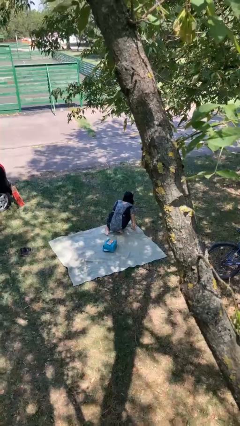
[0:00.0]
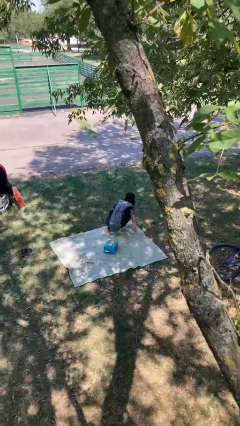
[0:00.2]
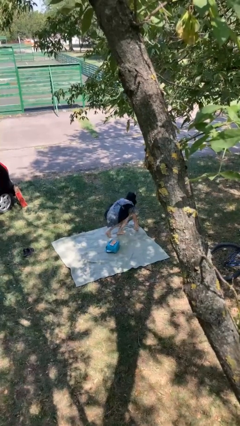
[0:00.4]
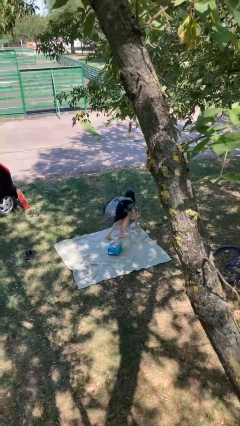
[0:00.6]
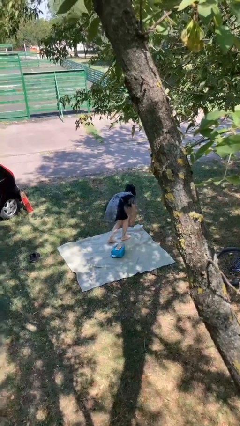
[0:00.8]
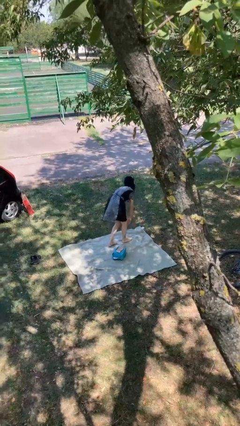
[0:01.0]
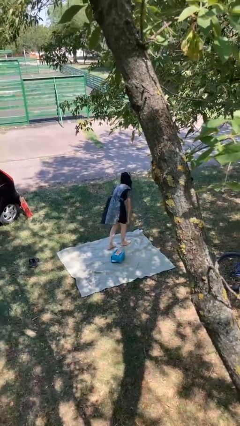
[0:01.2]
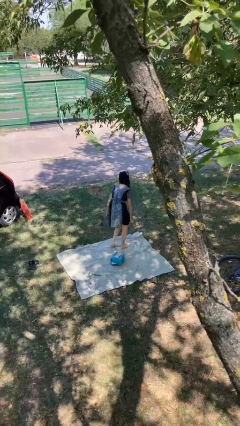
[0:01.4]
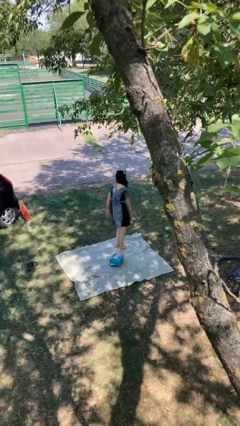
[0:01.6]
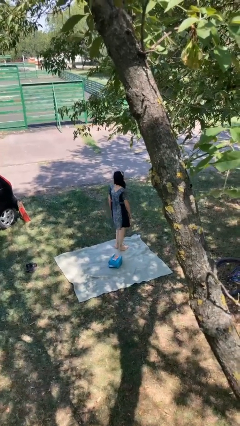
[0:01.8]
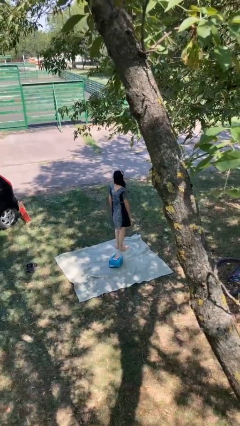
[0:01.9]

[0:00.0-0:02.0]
person stands up from floor

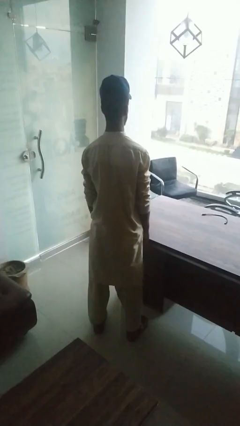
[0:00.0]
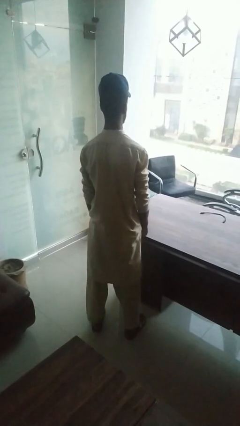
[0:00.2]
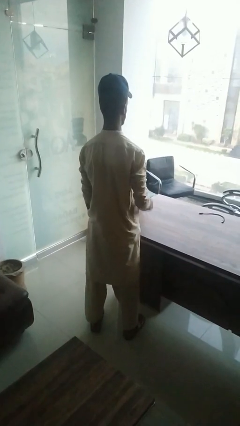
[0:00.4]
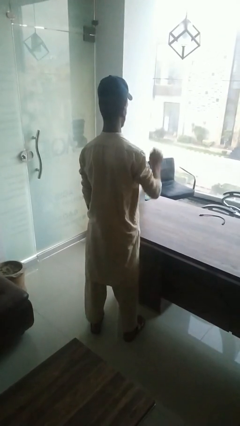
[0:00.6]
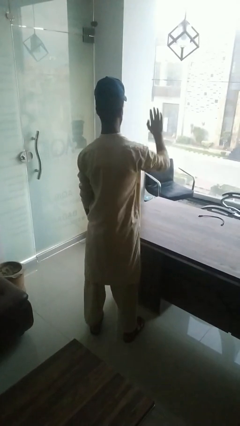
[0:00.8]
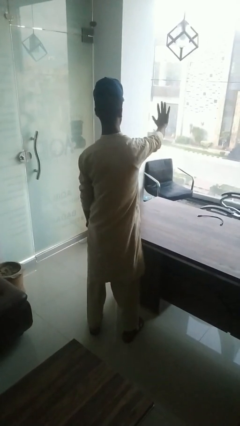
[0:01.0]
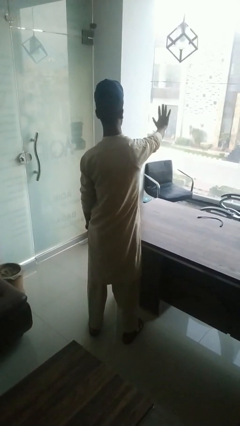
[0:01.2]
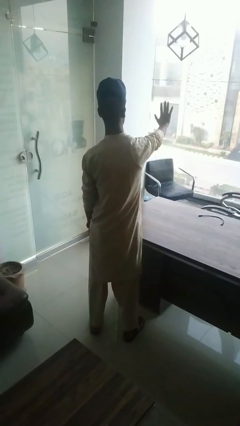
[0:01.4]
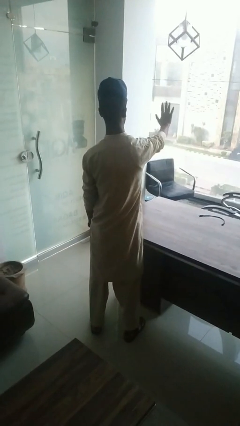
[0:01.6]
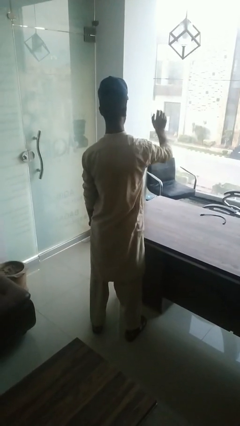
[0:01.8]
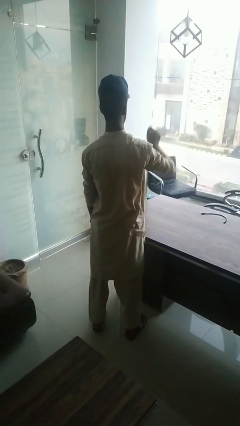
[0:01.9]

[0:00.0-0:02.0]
person gestures stop

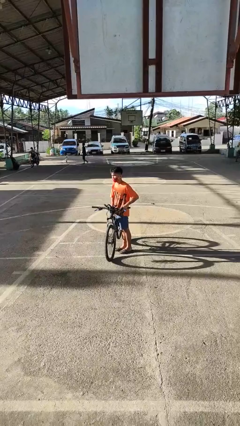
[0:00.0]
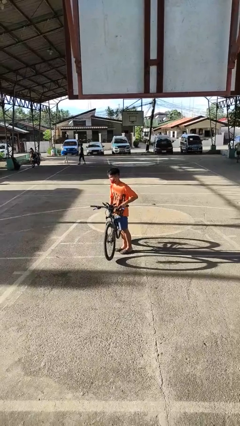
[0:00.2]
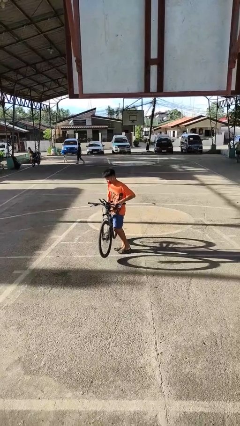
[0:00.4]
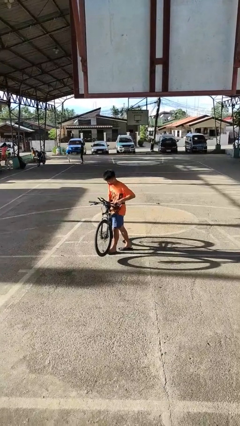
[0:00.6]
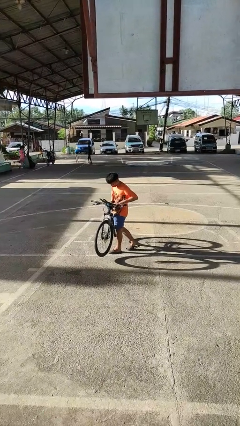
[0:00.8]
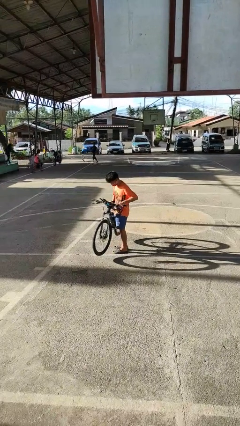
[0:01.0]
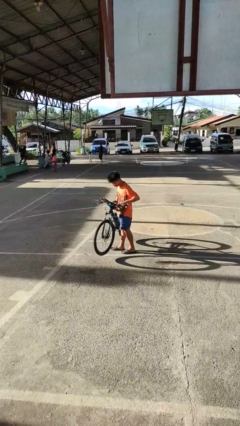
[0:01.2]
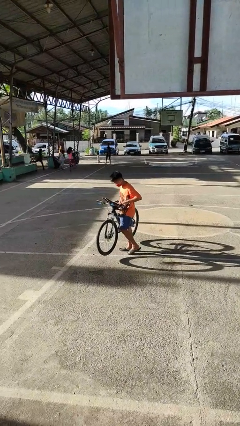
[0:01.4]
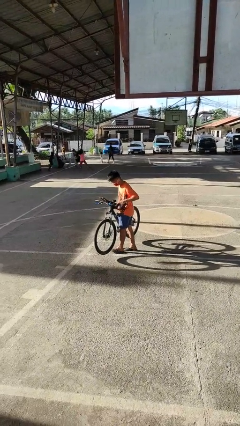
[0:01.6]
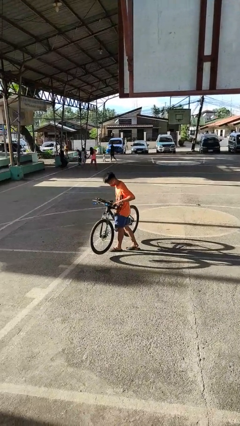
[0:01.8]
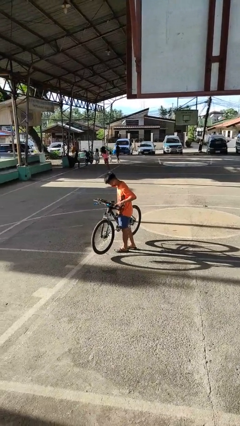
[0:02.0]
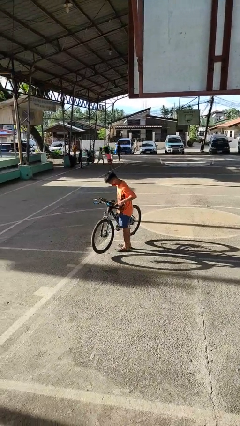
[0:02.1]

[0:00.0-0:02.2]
person carries bicycle

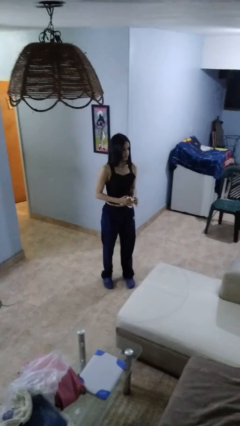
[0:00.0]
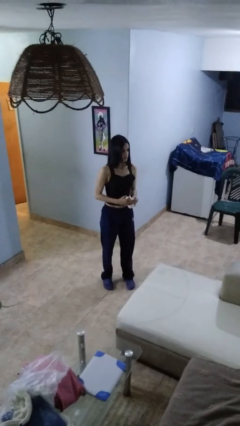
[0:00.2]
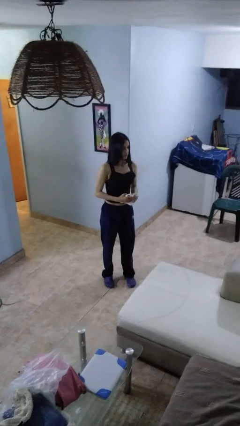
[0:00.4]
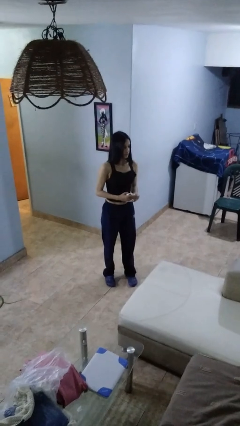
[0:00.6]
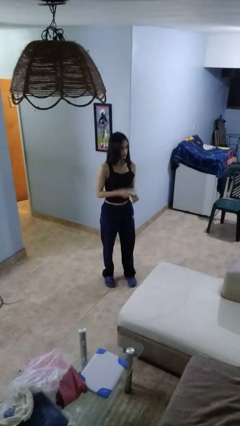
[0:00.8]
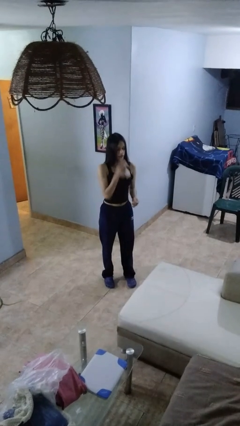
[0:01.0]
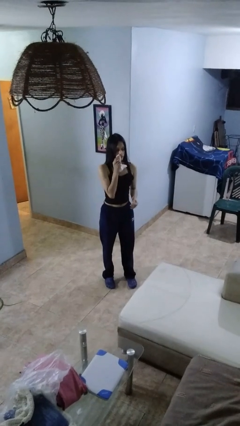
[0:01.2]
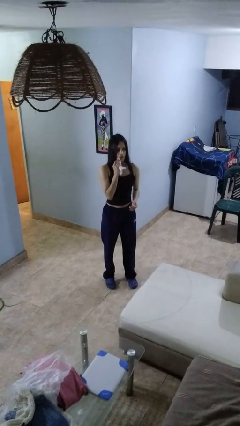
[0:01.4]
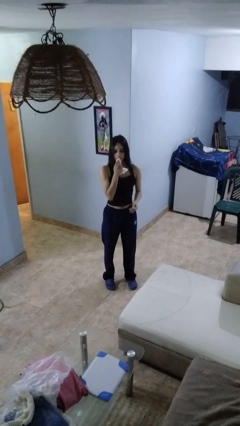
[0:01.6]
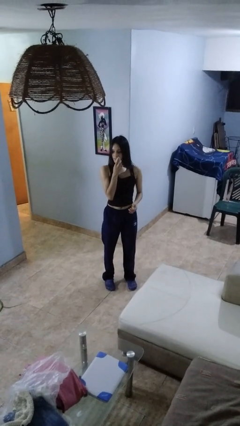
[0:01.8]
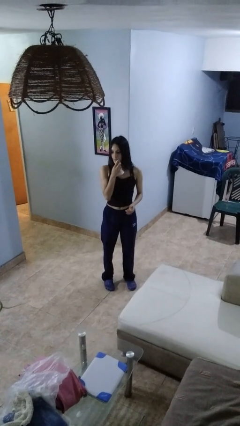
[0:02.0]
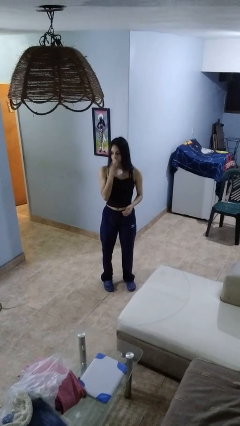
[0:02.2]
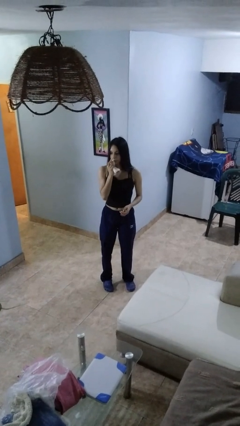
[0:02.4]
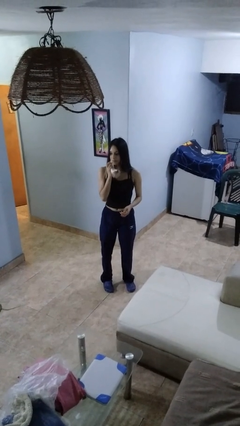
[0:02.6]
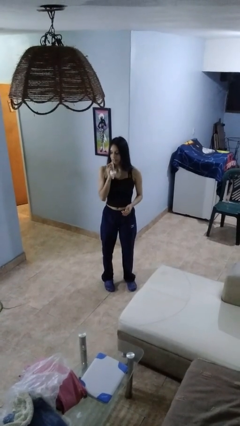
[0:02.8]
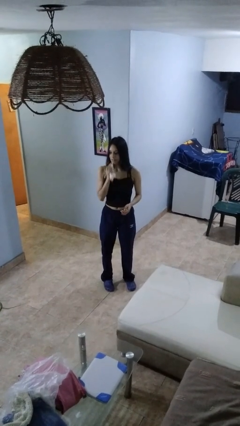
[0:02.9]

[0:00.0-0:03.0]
person wipes mouth with napkin

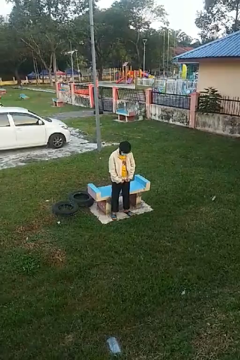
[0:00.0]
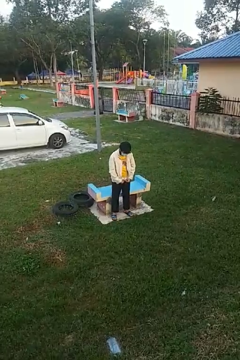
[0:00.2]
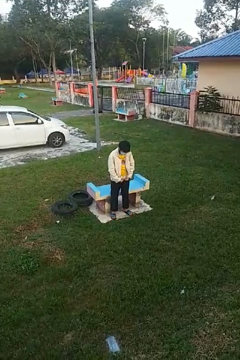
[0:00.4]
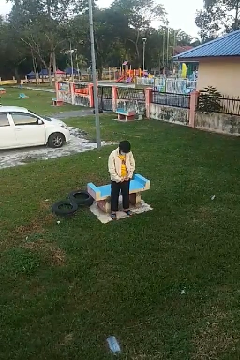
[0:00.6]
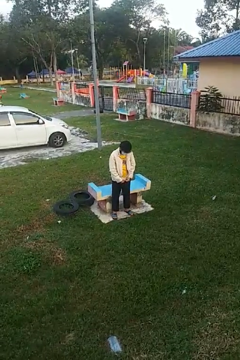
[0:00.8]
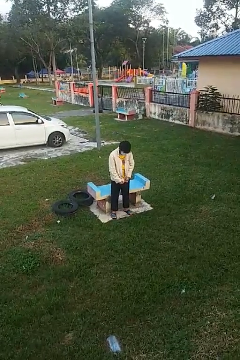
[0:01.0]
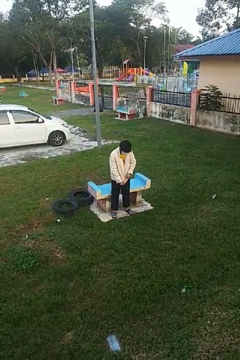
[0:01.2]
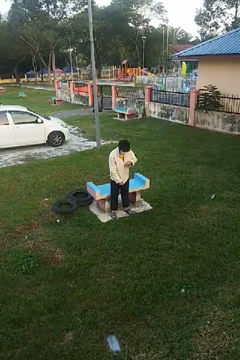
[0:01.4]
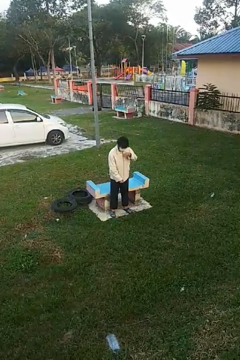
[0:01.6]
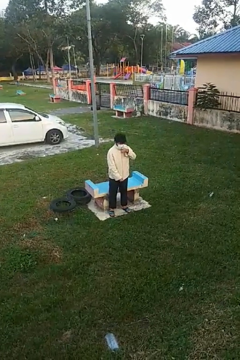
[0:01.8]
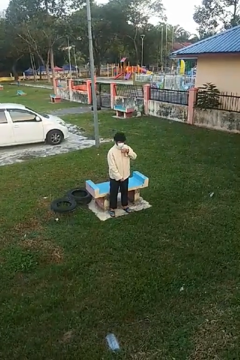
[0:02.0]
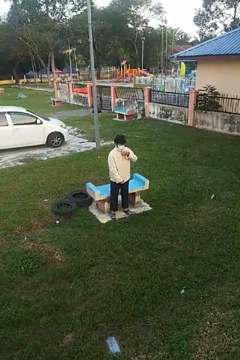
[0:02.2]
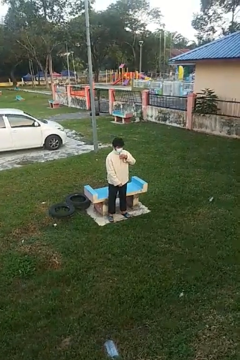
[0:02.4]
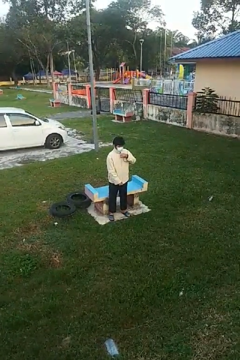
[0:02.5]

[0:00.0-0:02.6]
person zips up jacket

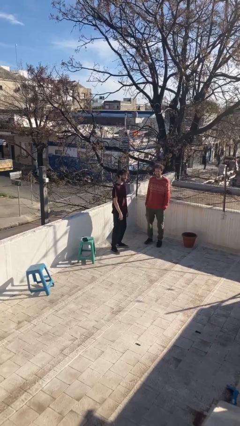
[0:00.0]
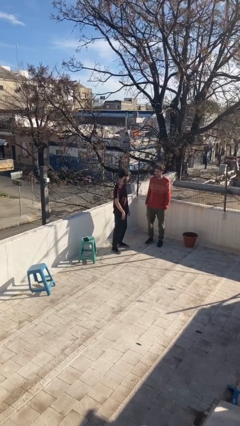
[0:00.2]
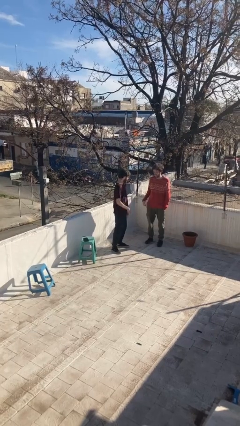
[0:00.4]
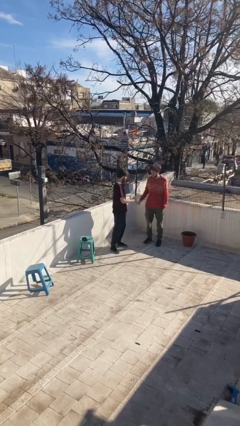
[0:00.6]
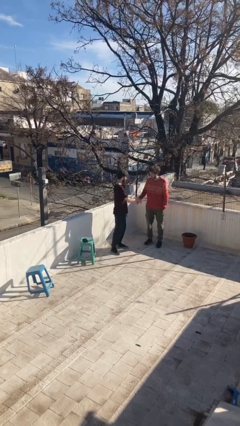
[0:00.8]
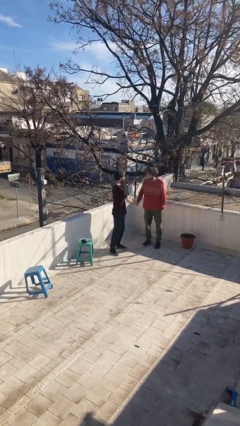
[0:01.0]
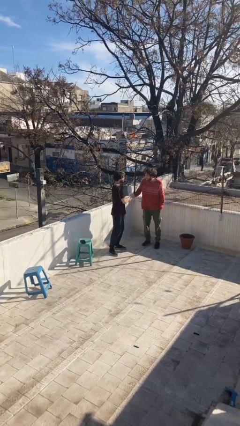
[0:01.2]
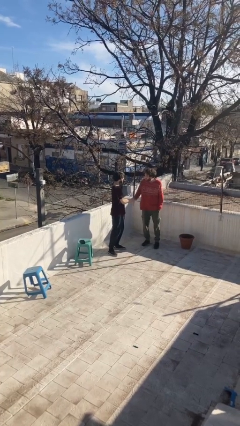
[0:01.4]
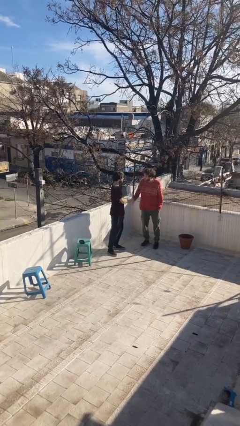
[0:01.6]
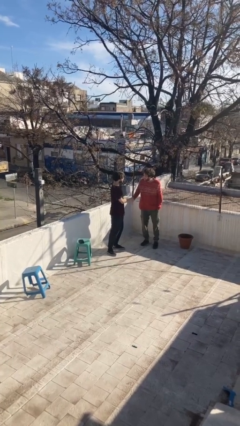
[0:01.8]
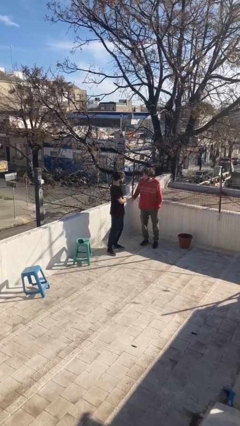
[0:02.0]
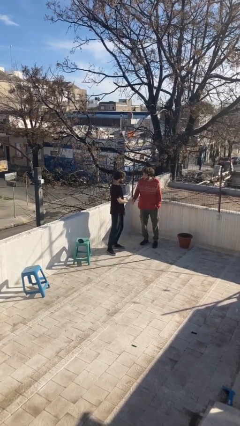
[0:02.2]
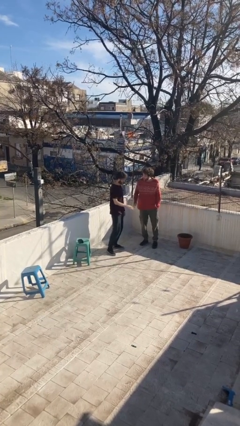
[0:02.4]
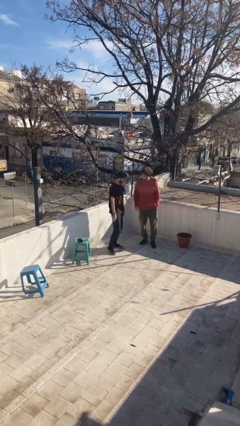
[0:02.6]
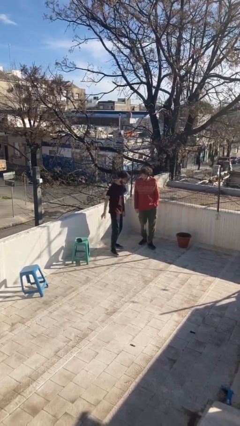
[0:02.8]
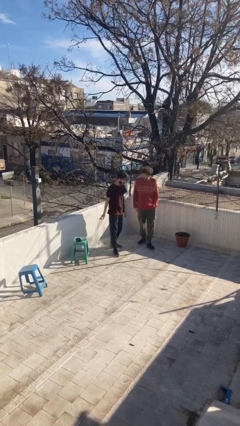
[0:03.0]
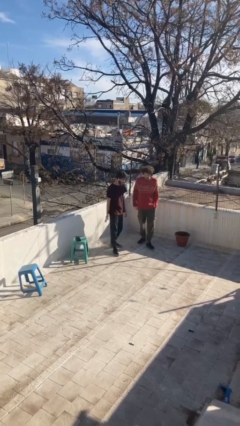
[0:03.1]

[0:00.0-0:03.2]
person shakes hand

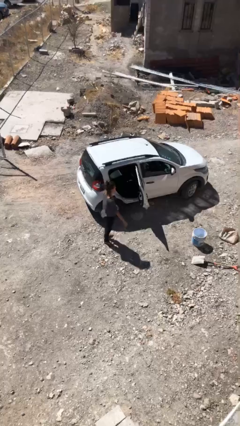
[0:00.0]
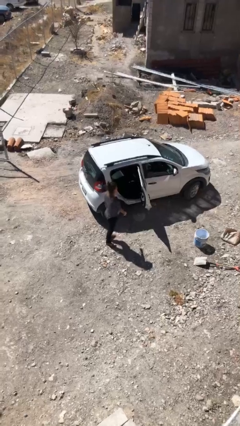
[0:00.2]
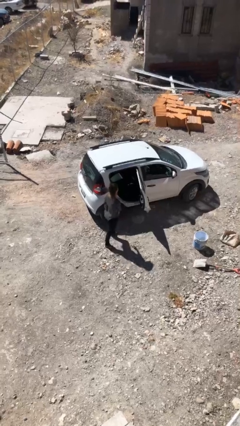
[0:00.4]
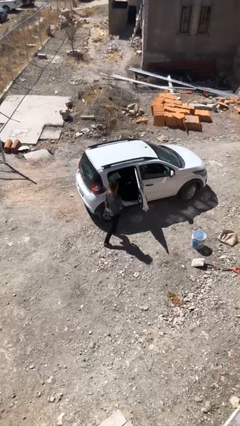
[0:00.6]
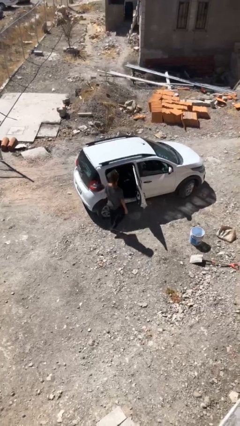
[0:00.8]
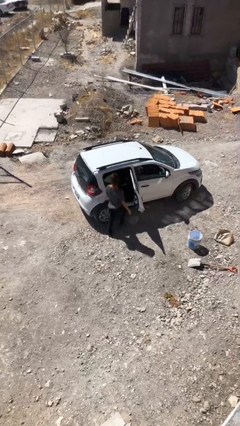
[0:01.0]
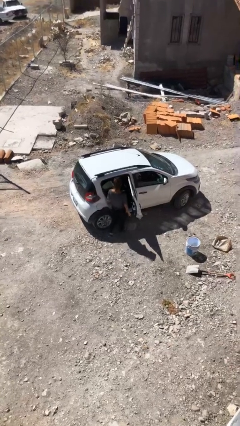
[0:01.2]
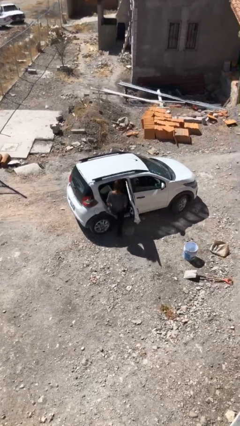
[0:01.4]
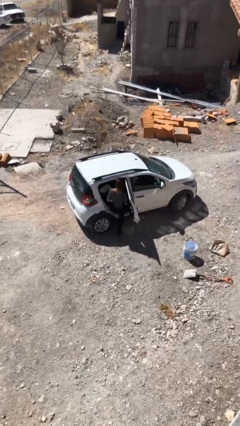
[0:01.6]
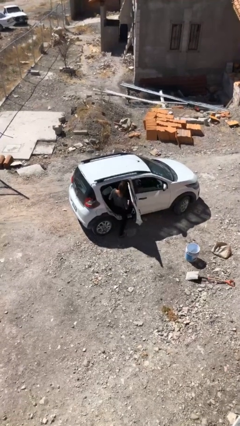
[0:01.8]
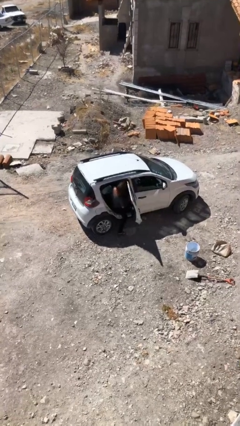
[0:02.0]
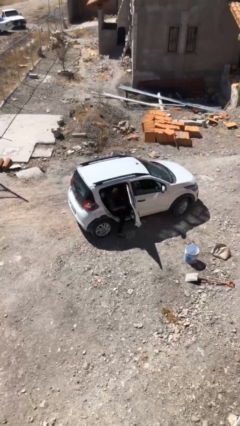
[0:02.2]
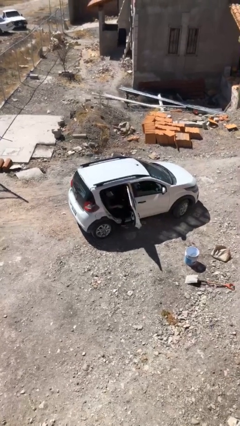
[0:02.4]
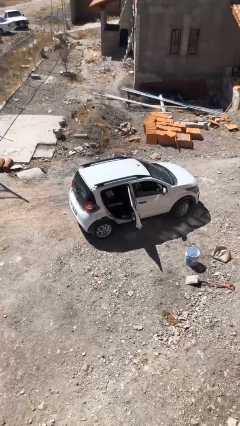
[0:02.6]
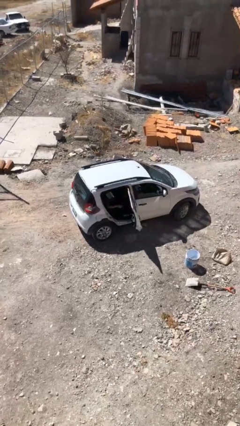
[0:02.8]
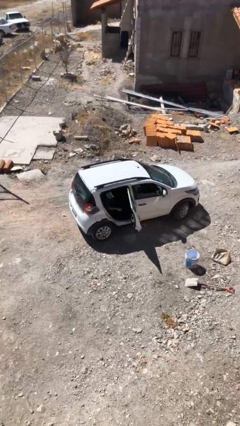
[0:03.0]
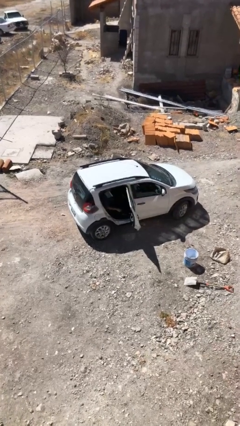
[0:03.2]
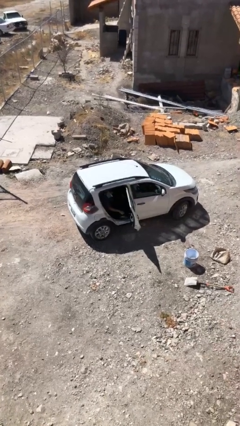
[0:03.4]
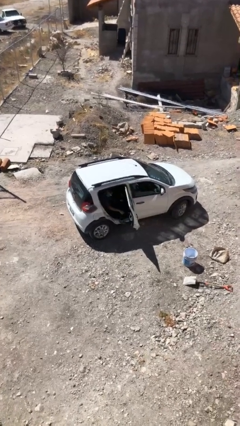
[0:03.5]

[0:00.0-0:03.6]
person enters car
